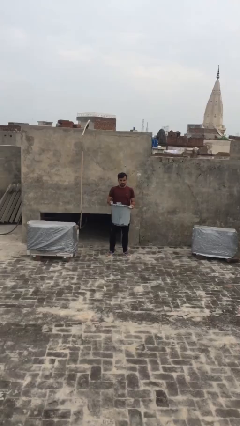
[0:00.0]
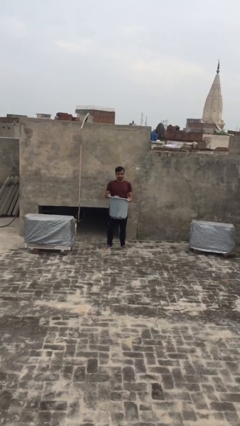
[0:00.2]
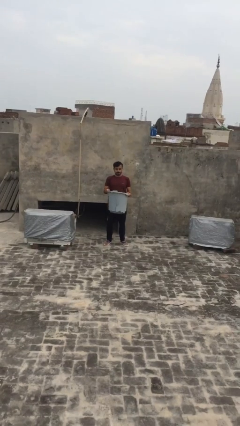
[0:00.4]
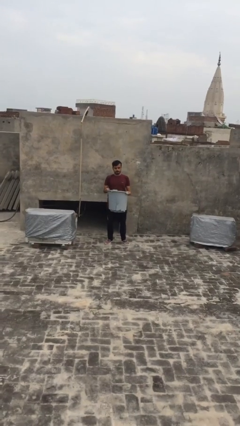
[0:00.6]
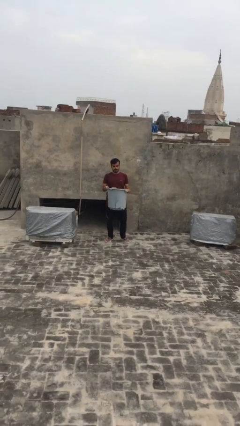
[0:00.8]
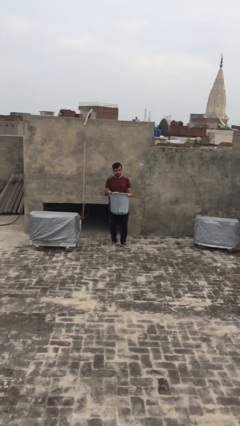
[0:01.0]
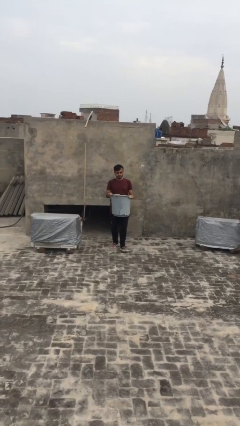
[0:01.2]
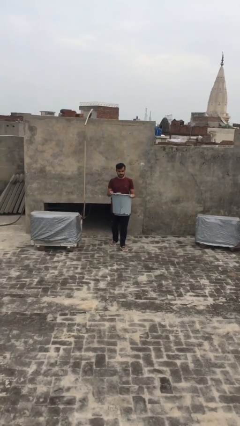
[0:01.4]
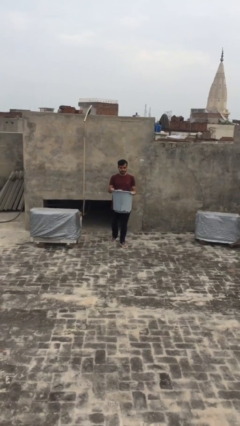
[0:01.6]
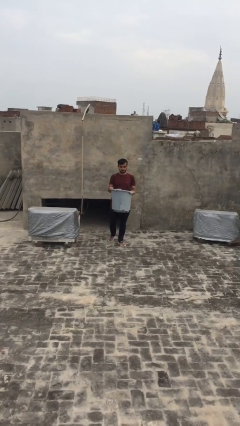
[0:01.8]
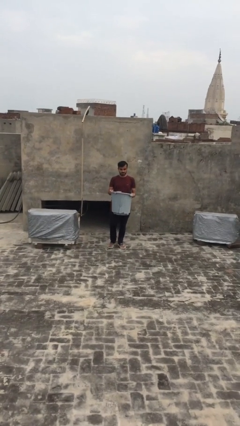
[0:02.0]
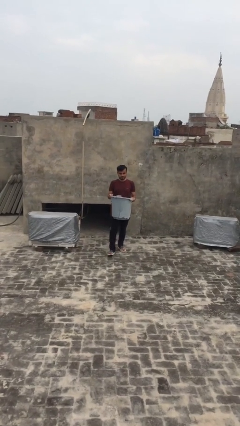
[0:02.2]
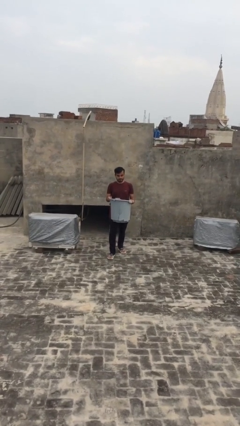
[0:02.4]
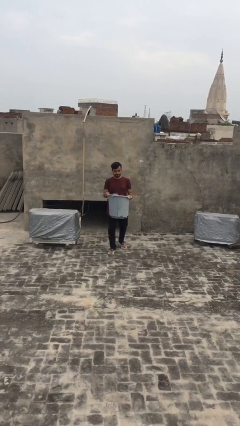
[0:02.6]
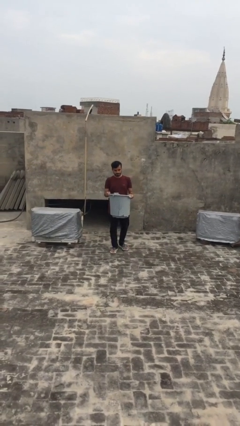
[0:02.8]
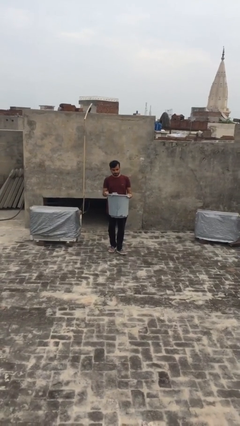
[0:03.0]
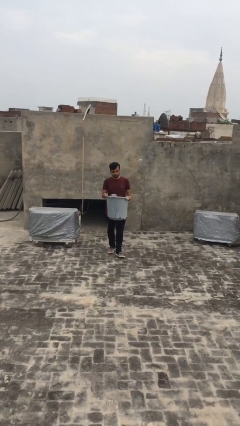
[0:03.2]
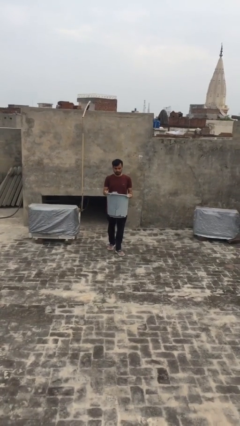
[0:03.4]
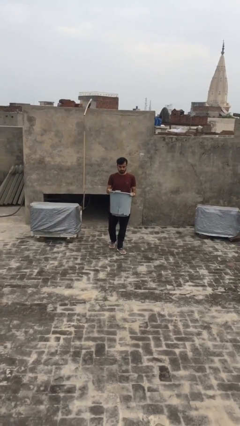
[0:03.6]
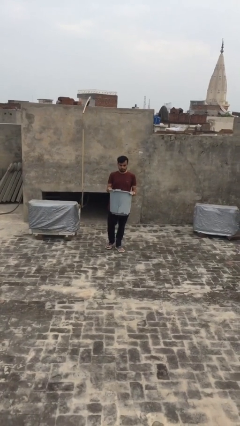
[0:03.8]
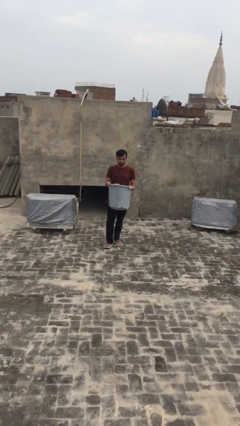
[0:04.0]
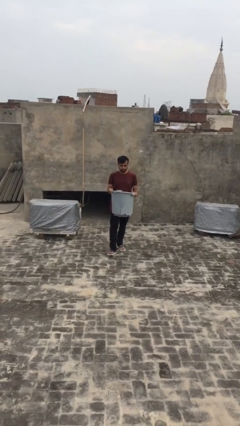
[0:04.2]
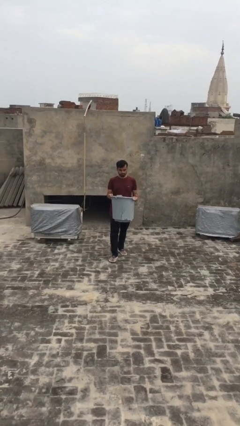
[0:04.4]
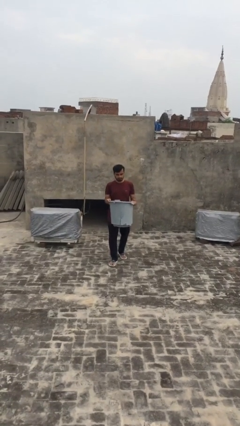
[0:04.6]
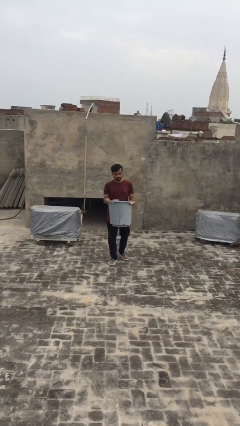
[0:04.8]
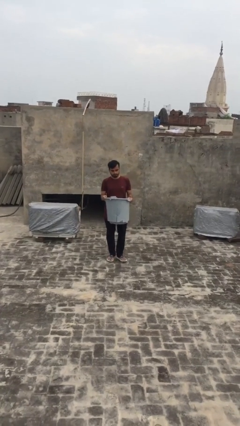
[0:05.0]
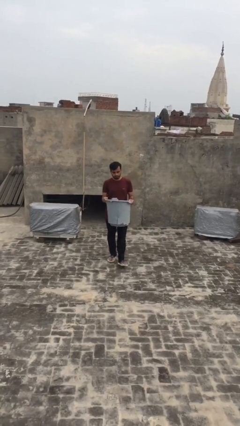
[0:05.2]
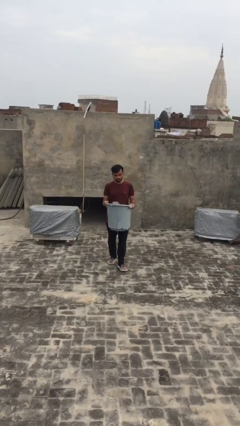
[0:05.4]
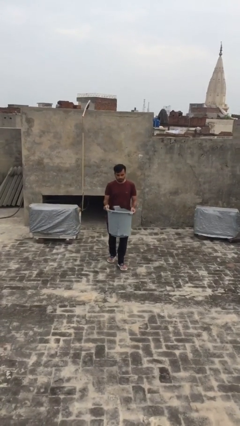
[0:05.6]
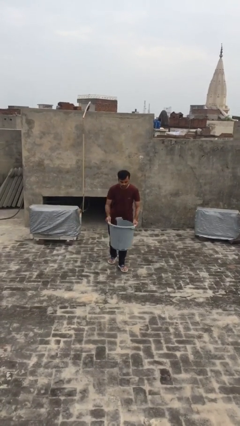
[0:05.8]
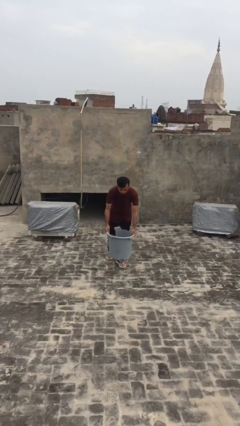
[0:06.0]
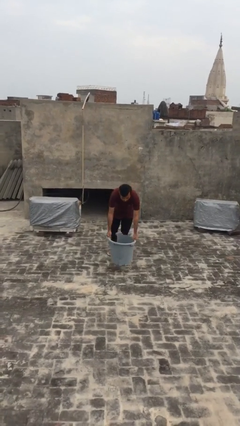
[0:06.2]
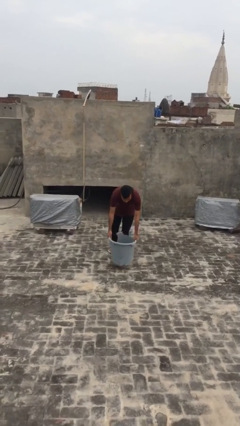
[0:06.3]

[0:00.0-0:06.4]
person carries heavy object

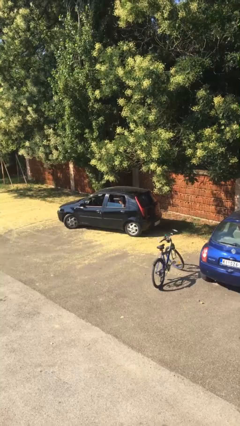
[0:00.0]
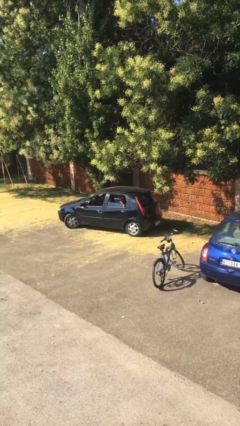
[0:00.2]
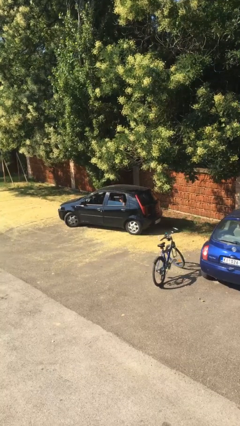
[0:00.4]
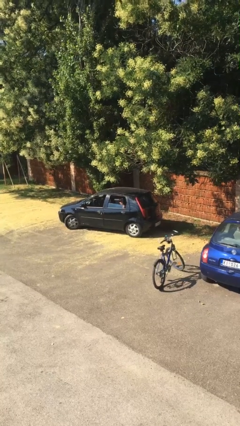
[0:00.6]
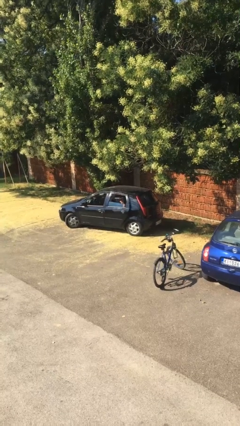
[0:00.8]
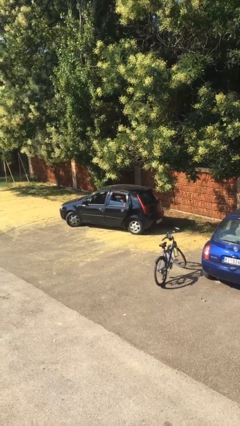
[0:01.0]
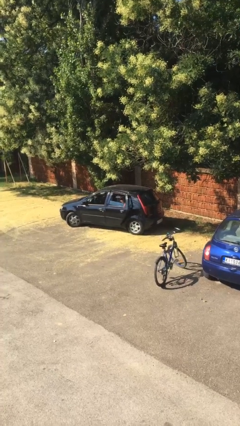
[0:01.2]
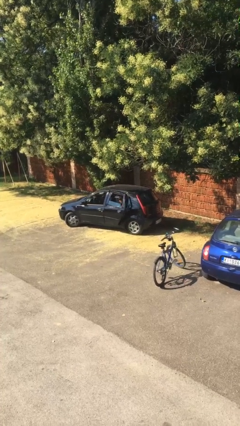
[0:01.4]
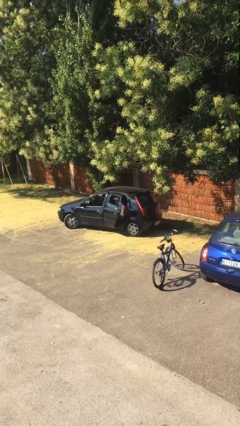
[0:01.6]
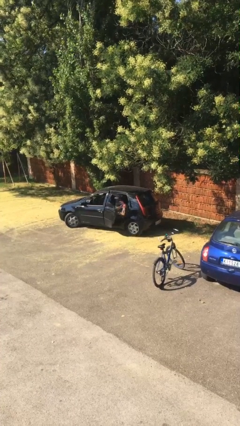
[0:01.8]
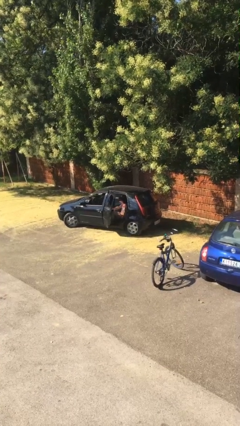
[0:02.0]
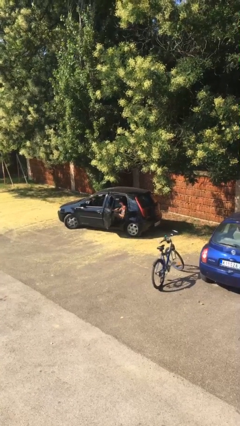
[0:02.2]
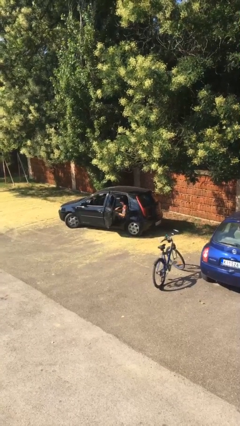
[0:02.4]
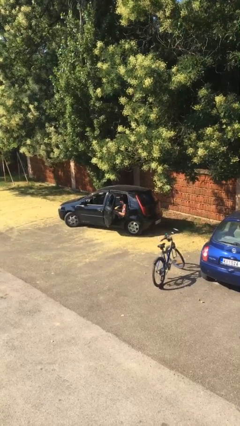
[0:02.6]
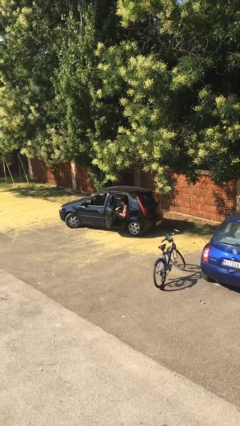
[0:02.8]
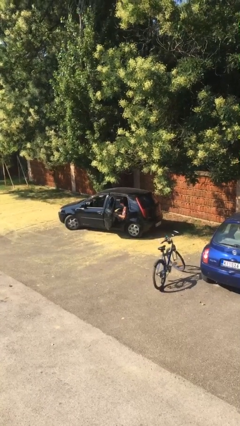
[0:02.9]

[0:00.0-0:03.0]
person opens car door

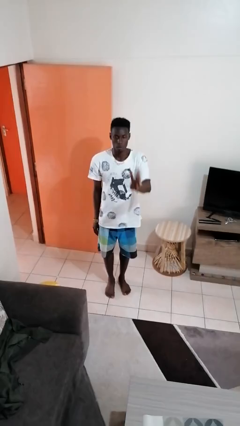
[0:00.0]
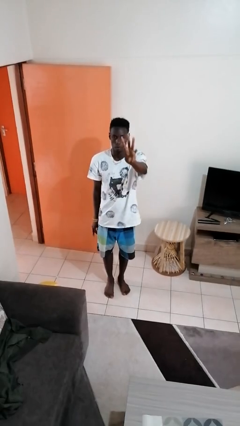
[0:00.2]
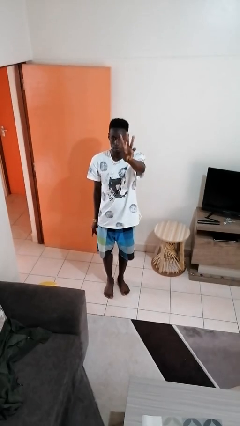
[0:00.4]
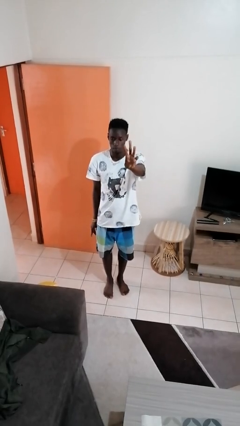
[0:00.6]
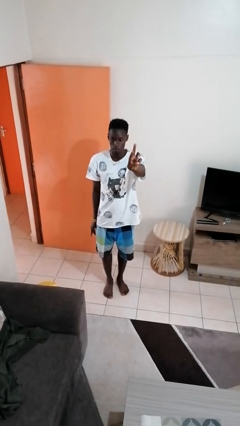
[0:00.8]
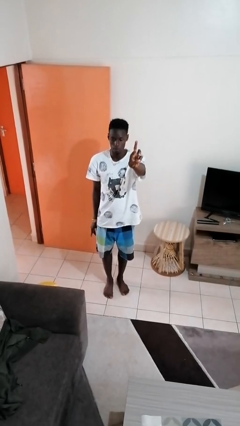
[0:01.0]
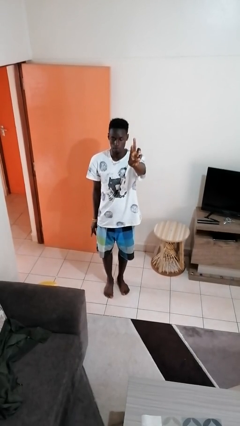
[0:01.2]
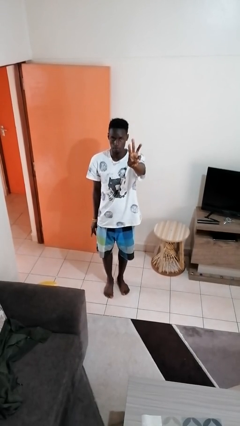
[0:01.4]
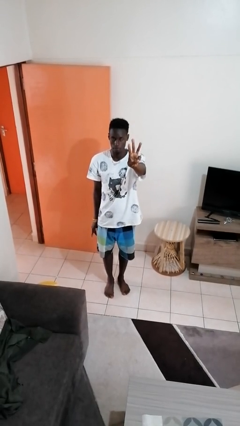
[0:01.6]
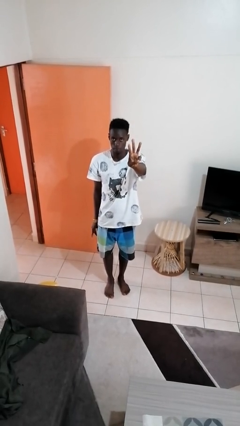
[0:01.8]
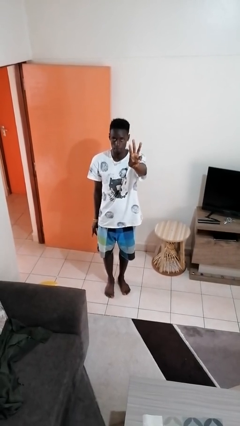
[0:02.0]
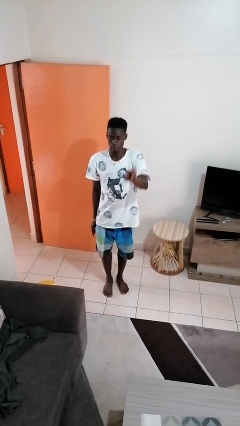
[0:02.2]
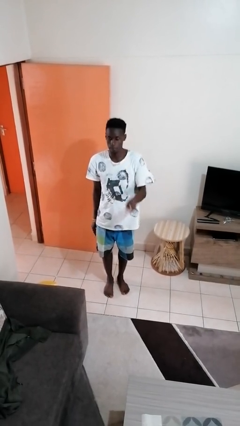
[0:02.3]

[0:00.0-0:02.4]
person gestures number three

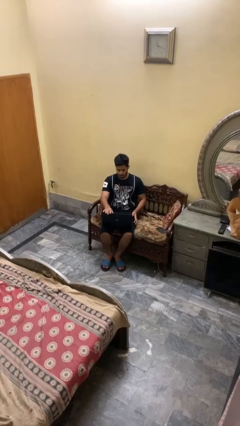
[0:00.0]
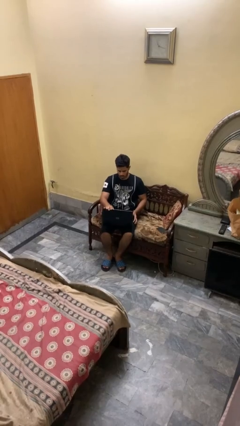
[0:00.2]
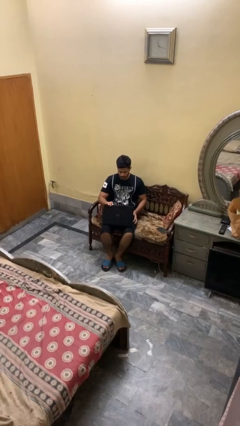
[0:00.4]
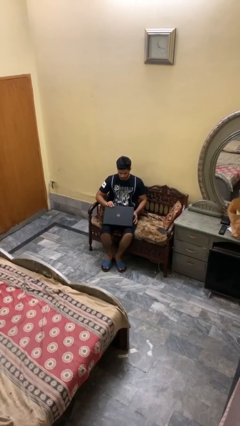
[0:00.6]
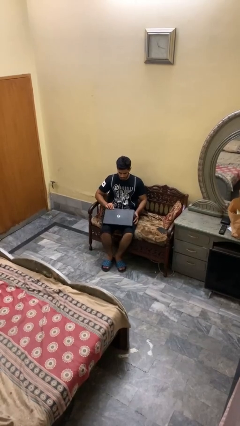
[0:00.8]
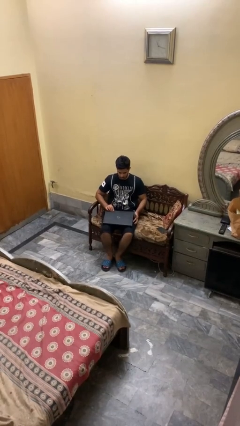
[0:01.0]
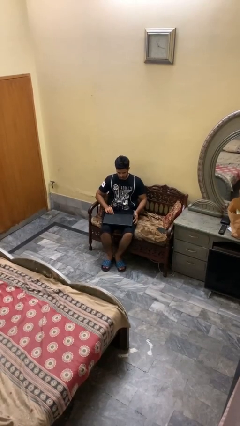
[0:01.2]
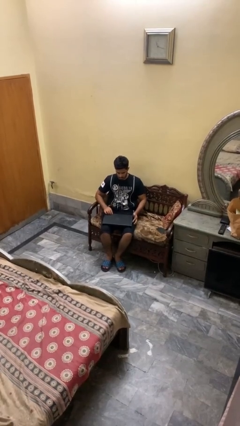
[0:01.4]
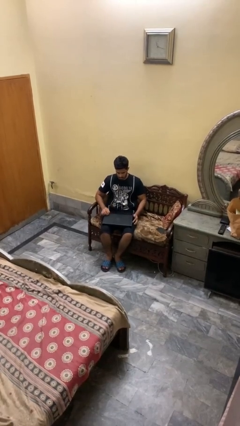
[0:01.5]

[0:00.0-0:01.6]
person closes laptop

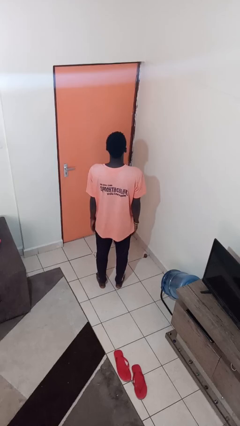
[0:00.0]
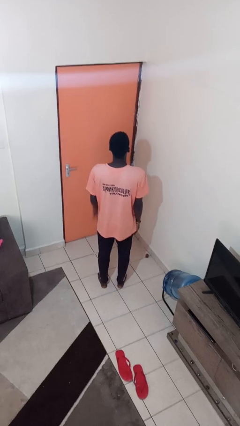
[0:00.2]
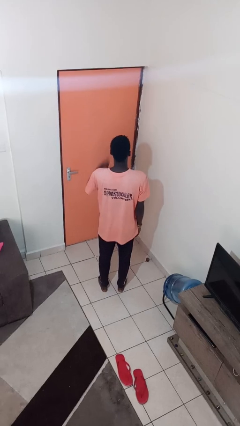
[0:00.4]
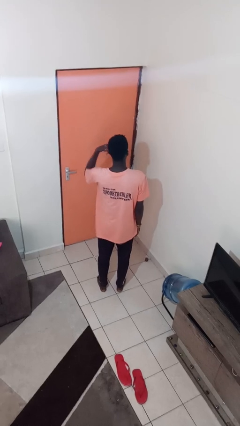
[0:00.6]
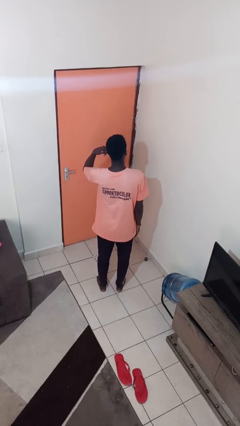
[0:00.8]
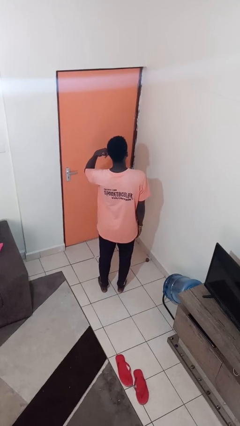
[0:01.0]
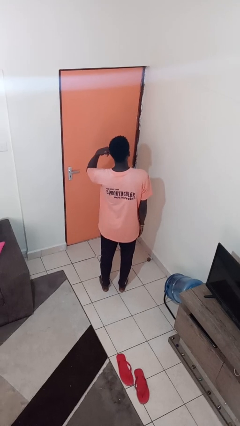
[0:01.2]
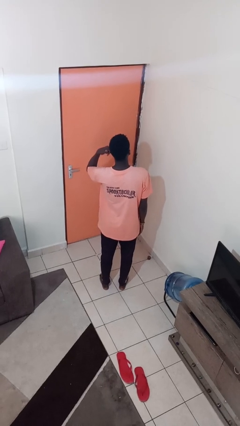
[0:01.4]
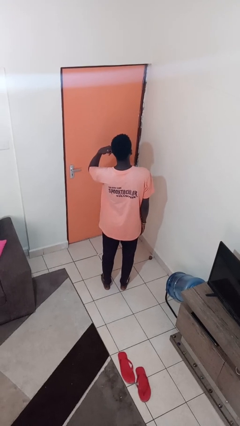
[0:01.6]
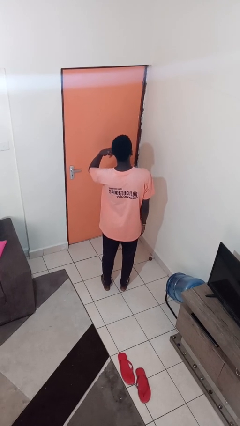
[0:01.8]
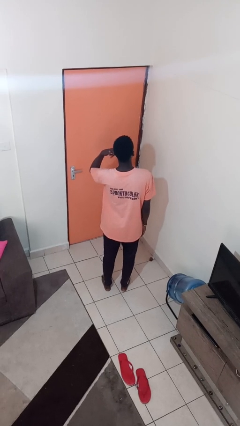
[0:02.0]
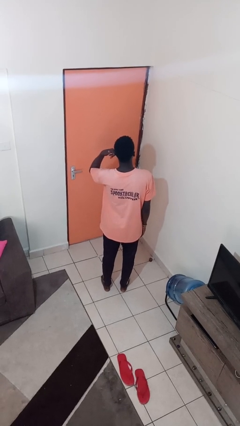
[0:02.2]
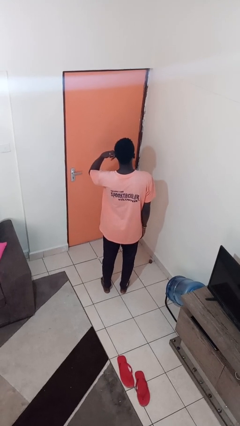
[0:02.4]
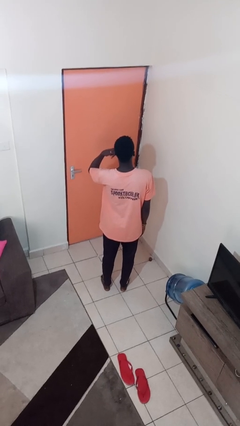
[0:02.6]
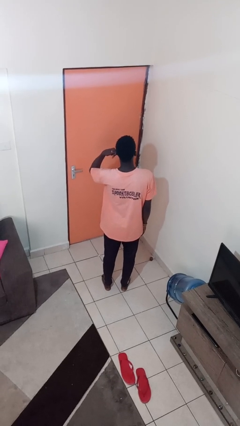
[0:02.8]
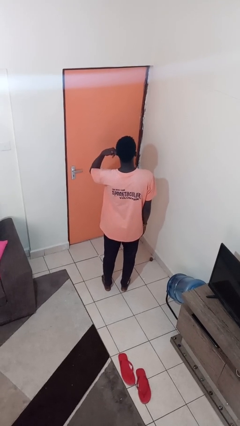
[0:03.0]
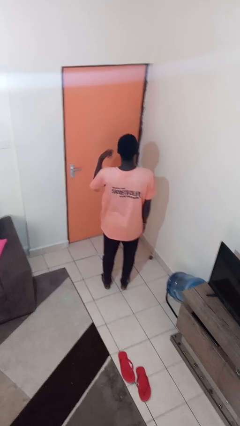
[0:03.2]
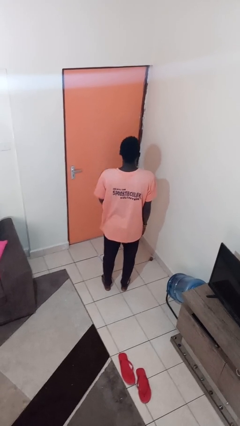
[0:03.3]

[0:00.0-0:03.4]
person gestures call me

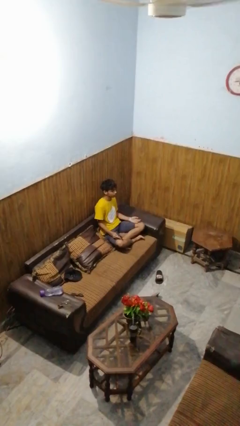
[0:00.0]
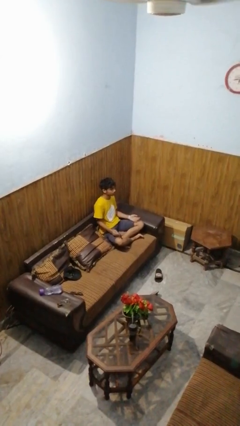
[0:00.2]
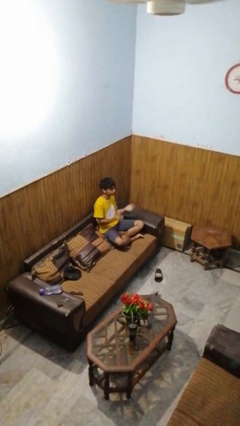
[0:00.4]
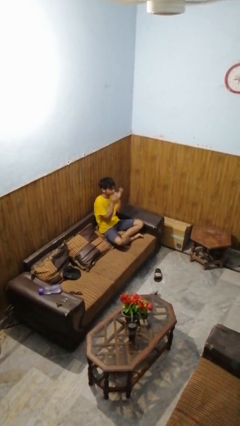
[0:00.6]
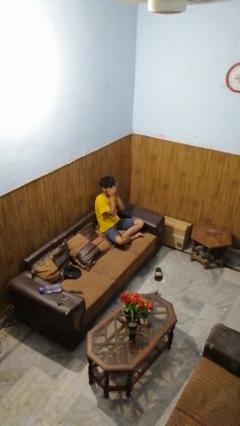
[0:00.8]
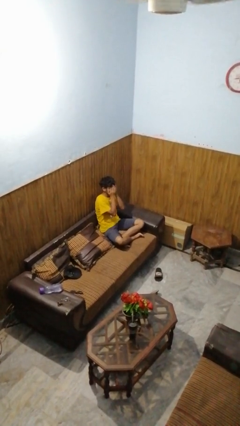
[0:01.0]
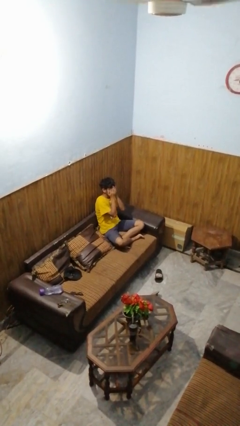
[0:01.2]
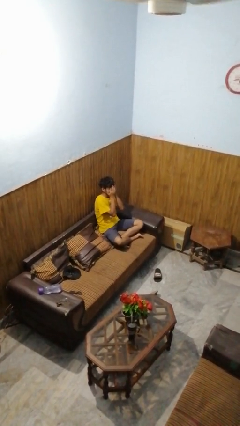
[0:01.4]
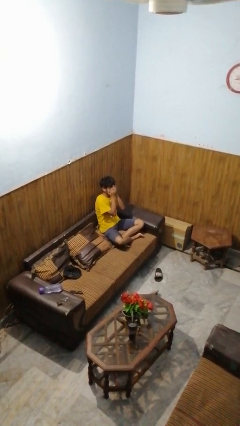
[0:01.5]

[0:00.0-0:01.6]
person covers face with hands
